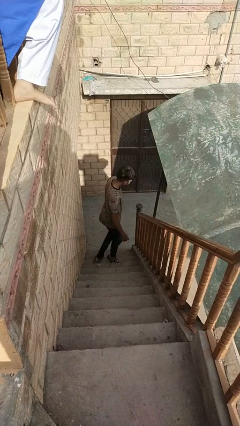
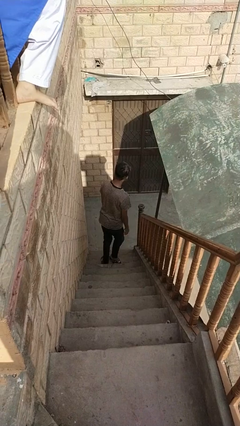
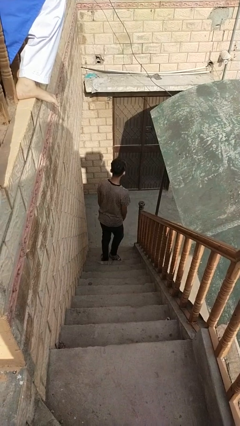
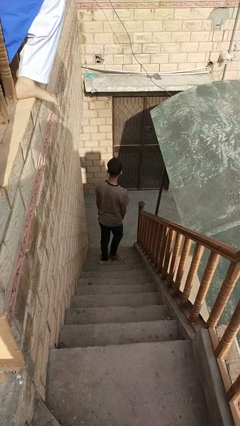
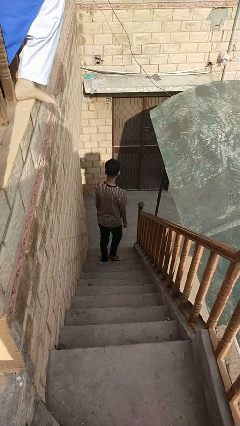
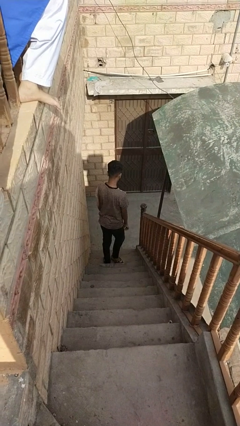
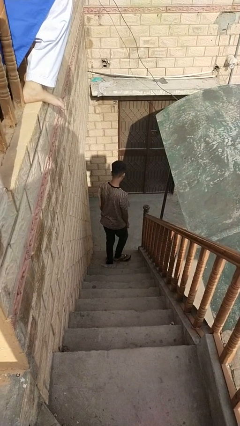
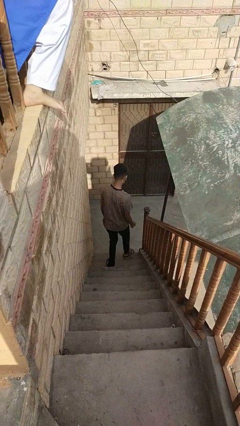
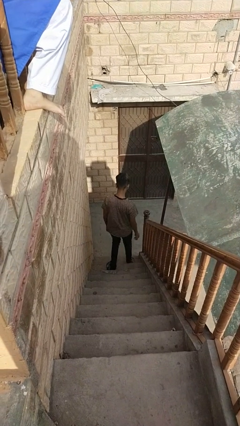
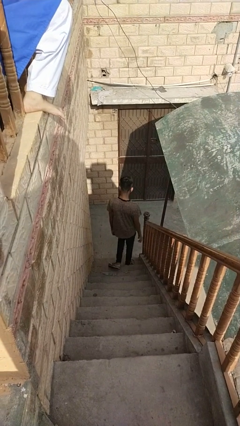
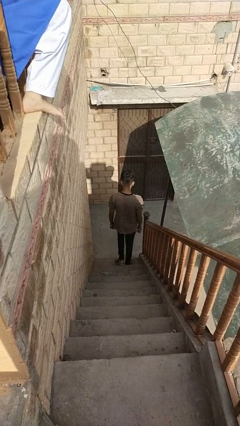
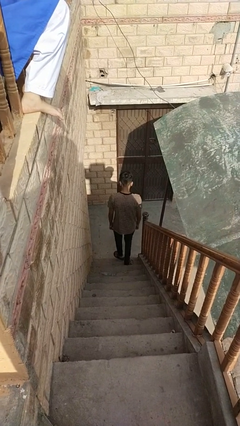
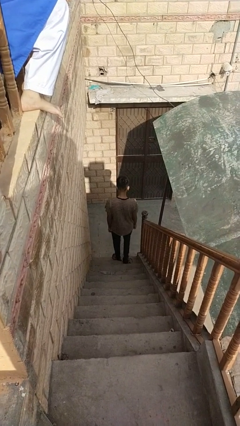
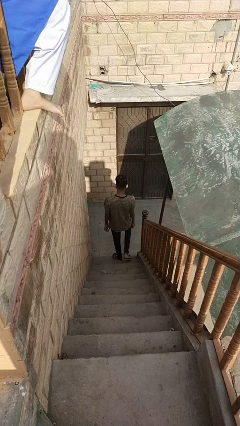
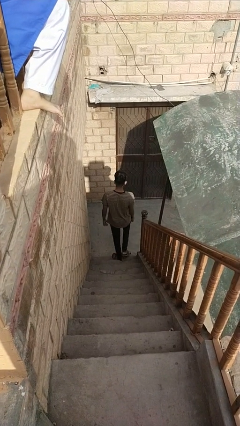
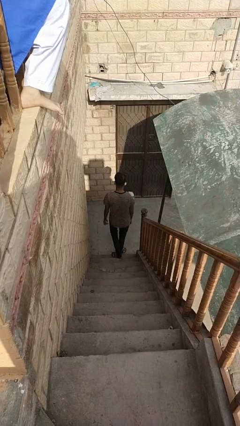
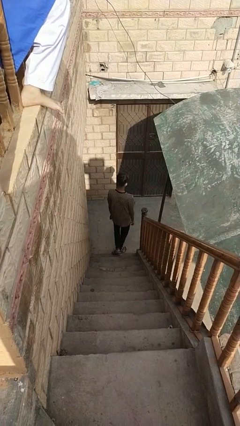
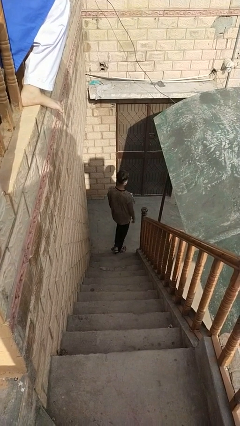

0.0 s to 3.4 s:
person climbs down stairs

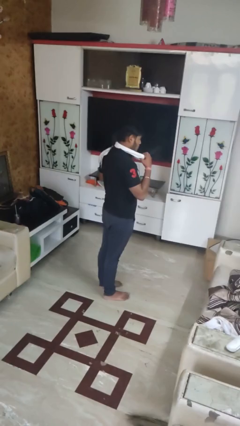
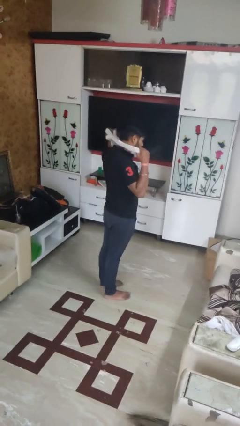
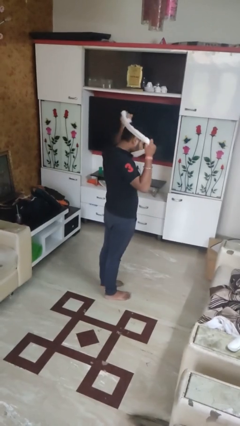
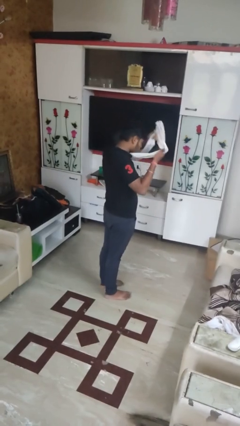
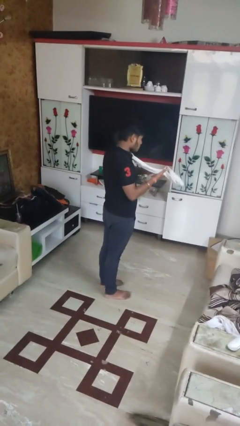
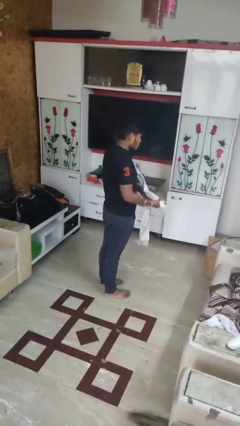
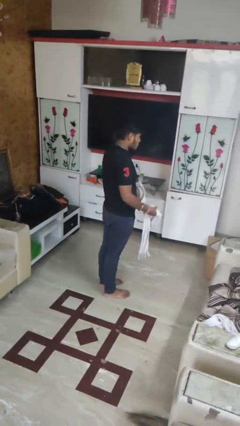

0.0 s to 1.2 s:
person takes off scarf

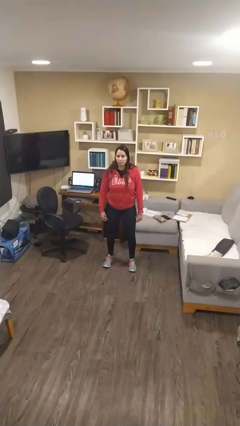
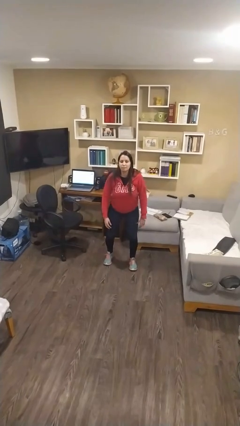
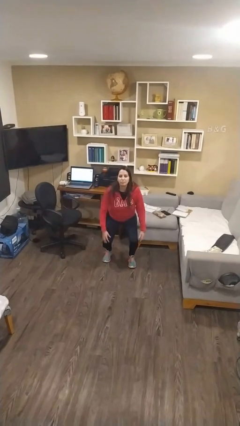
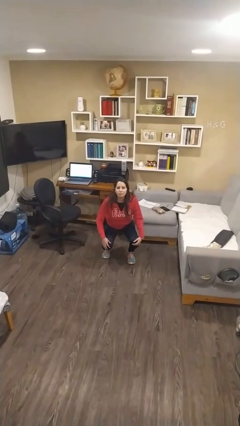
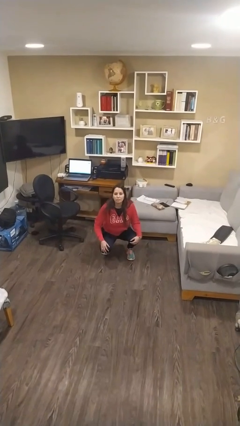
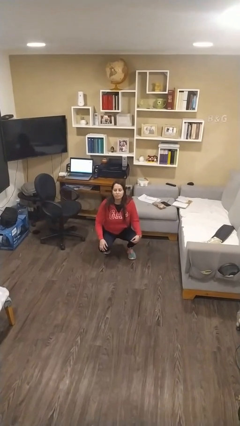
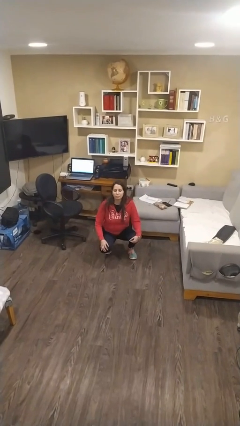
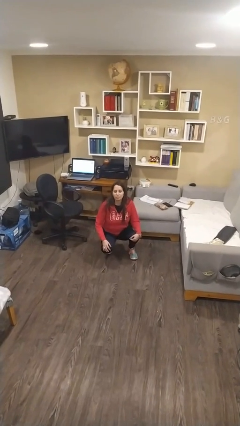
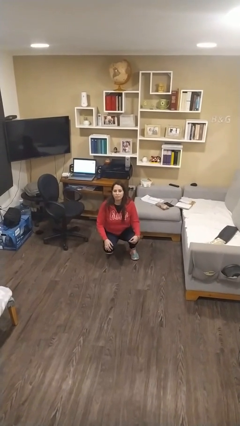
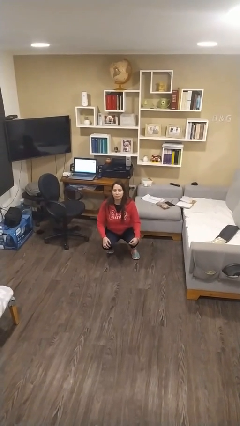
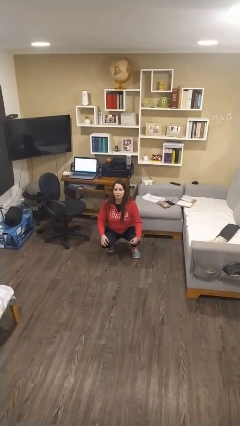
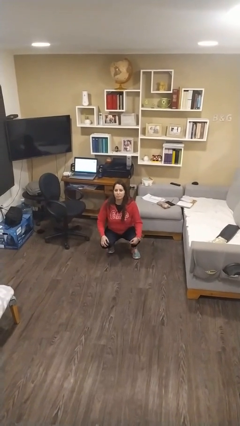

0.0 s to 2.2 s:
person squats

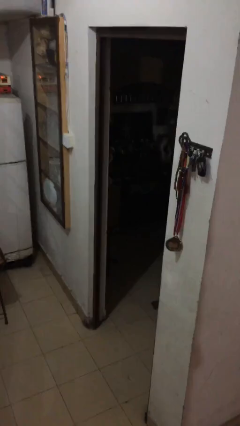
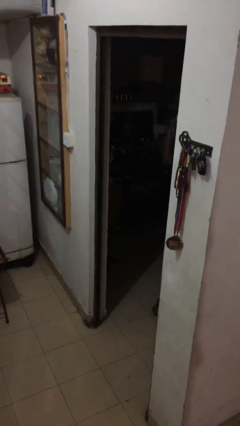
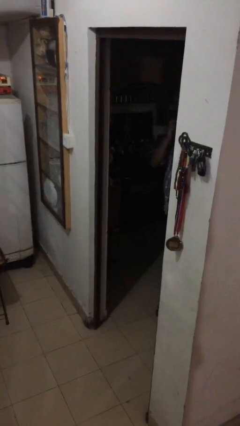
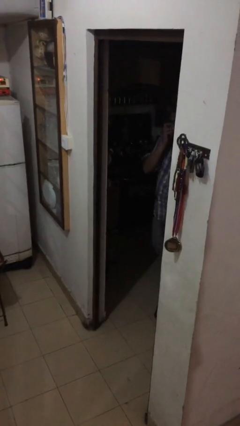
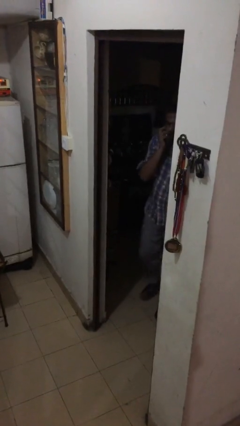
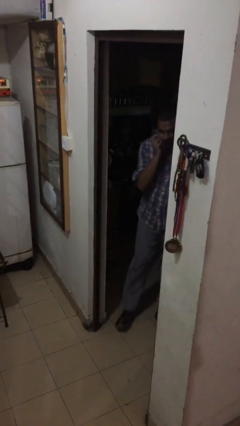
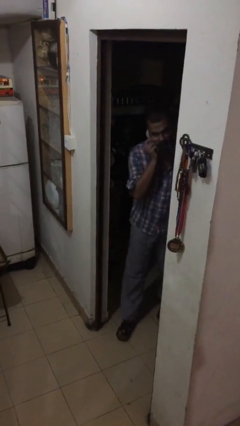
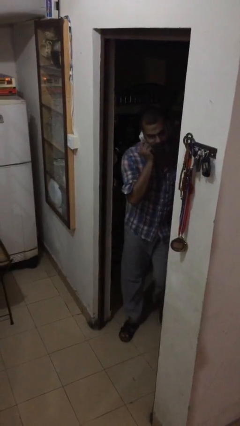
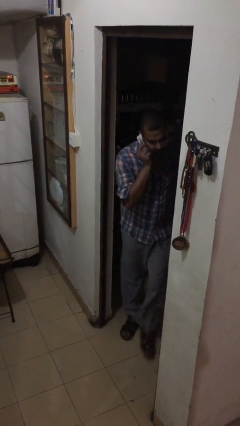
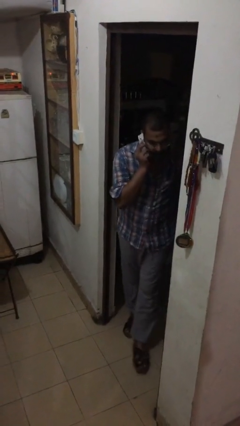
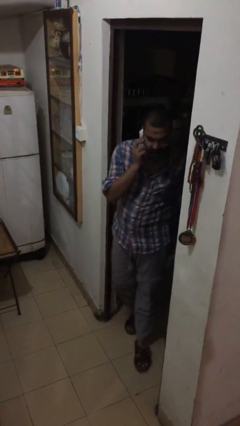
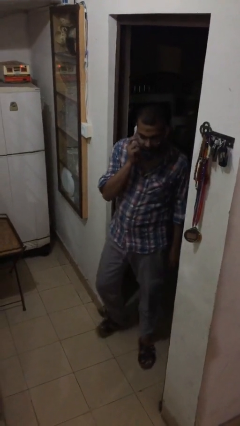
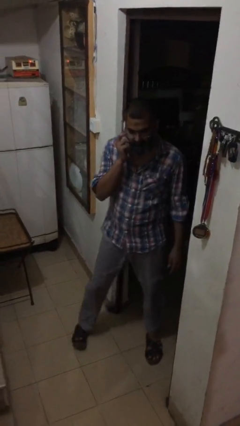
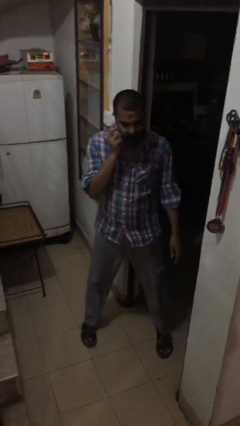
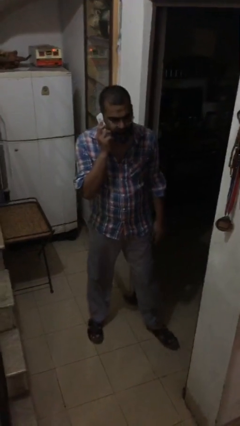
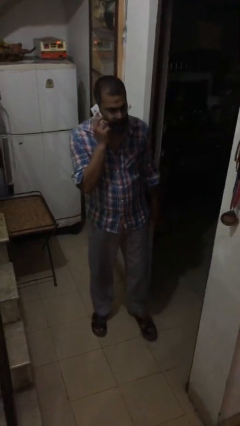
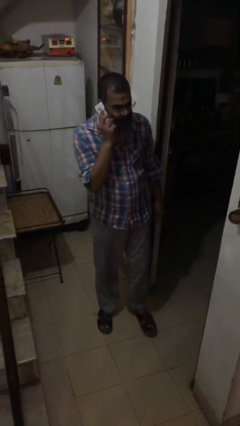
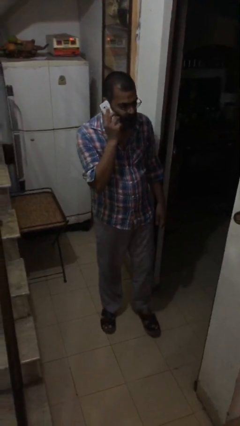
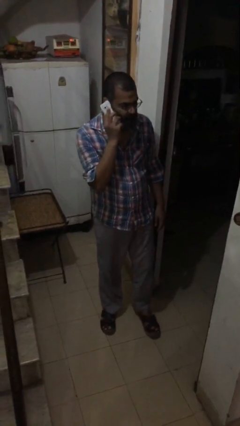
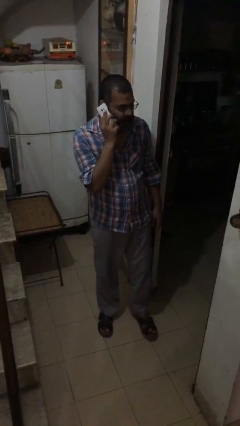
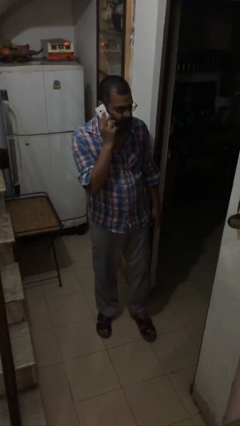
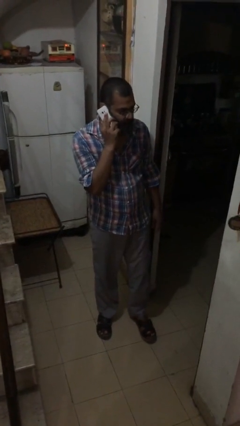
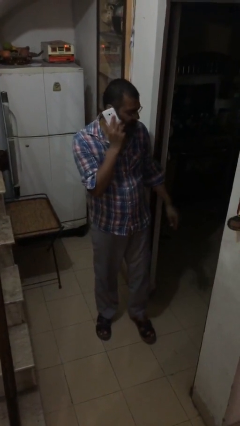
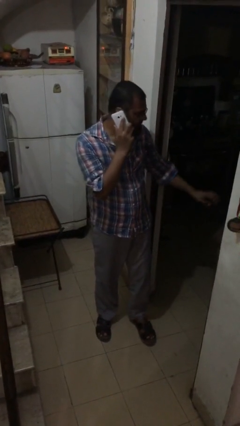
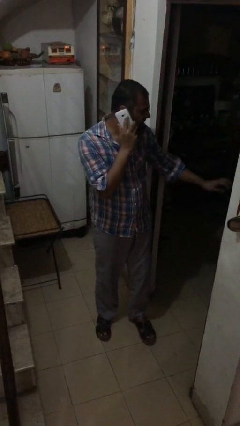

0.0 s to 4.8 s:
person enters scene through structure

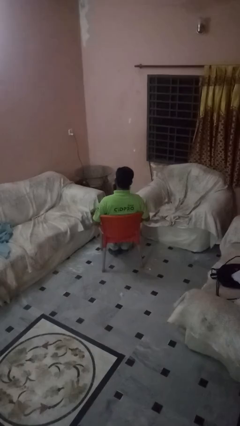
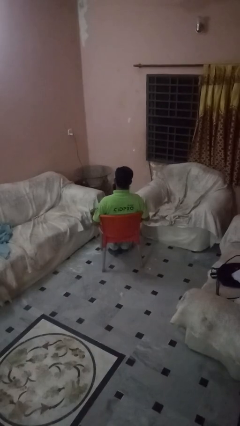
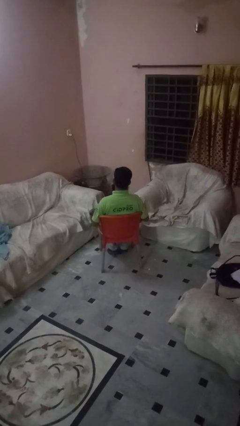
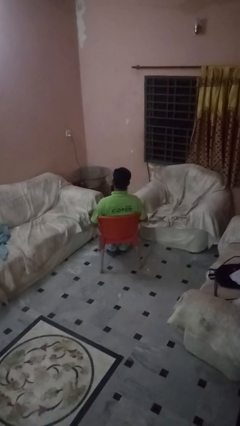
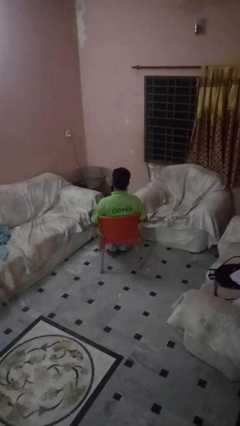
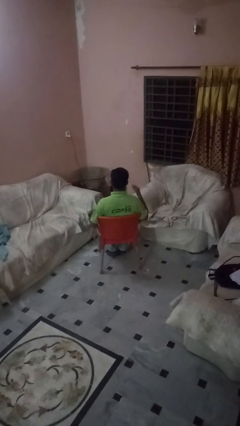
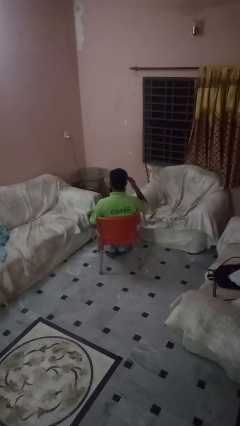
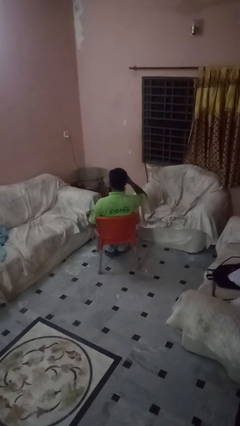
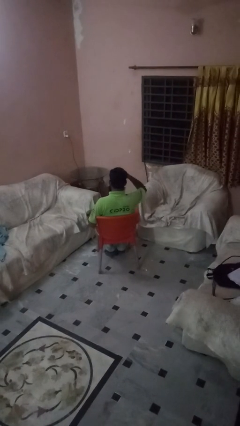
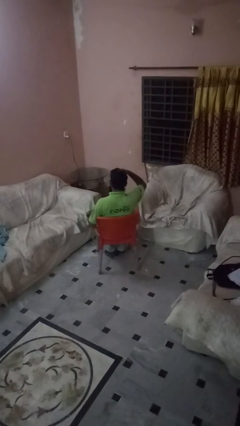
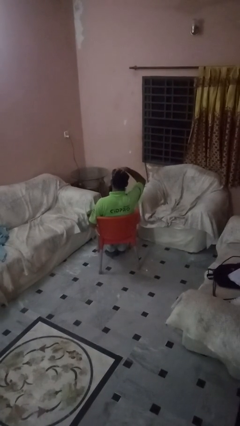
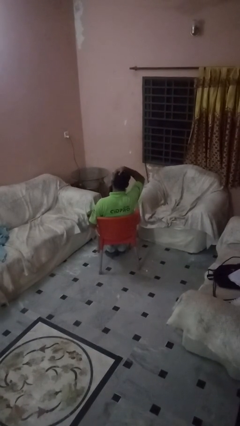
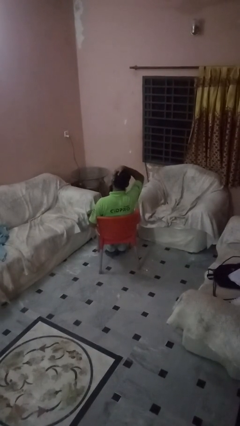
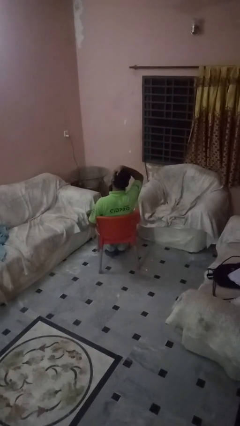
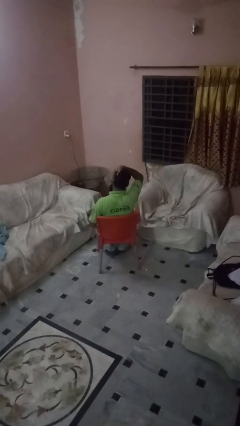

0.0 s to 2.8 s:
person strokes hair

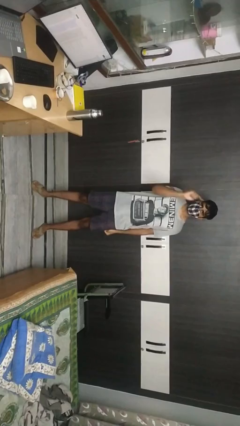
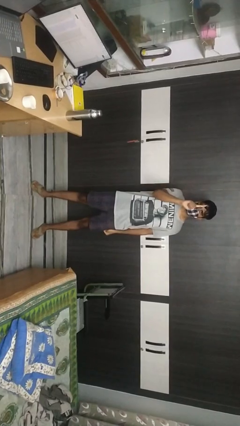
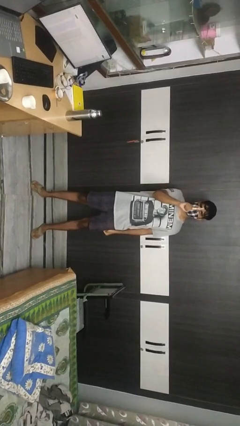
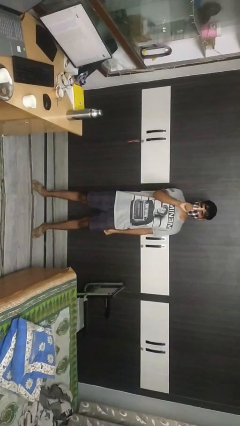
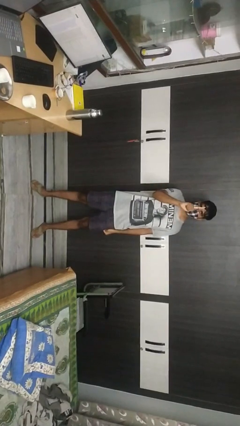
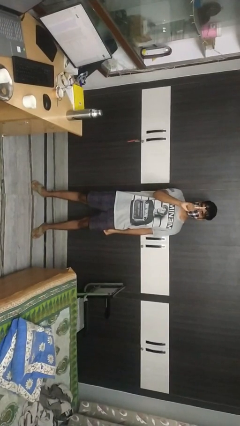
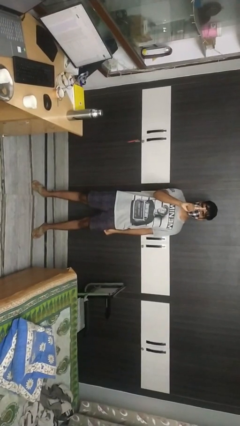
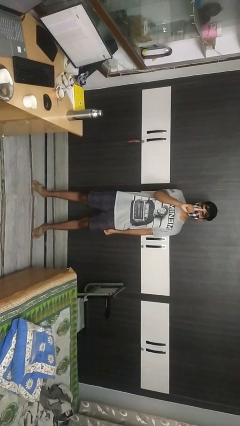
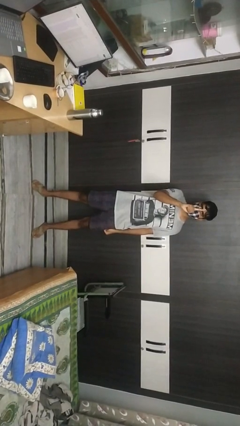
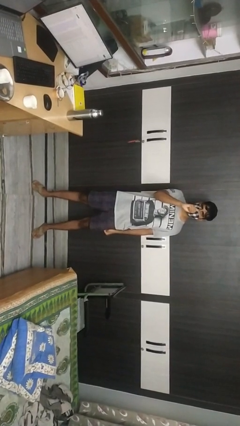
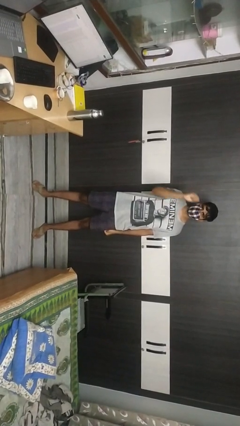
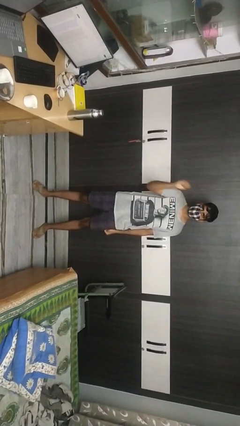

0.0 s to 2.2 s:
person gestures number one

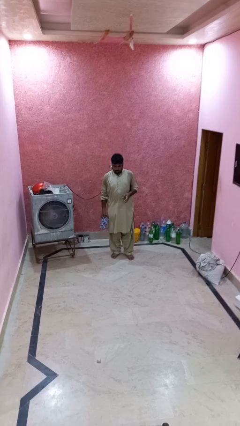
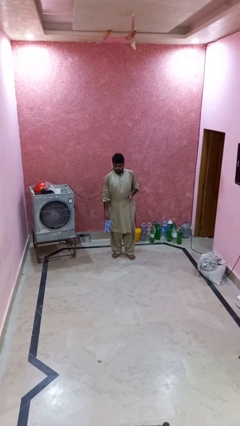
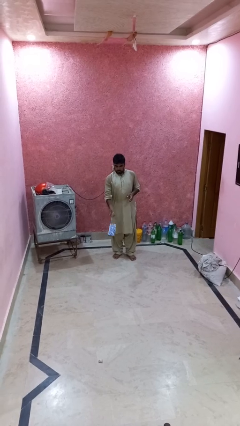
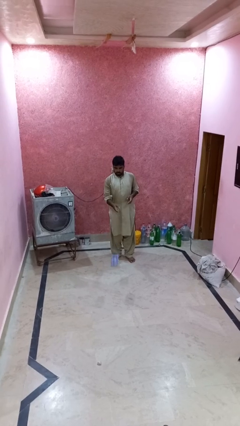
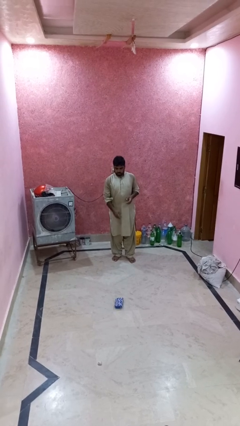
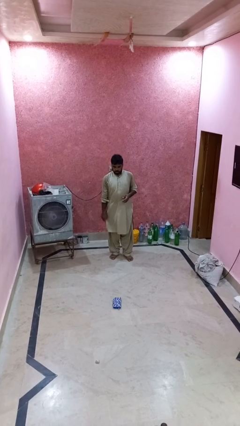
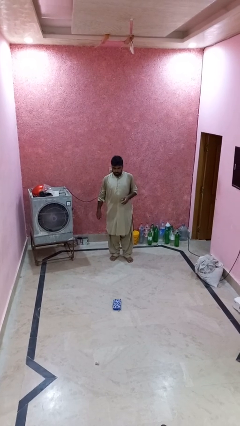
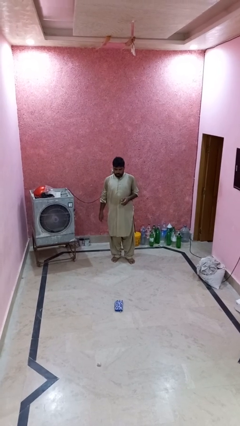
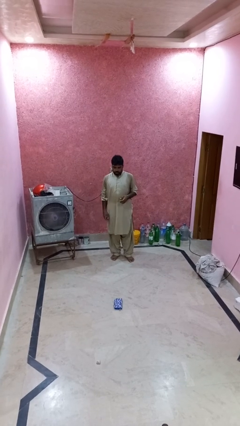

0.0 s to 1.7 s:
person throws object to ground
